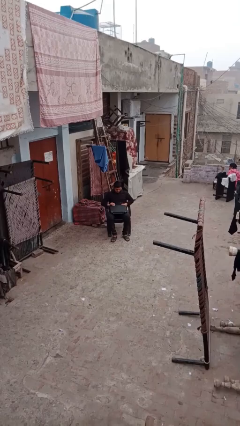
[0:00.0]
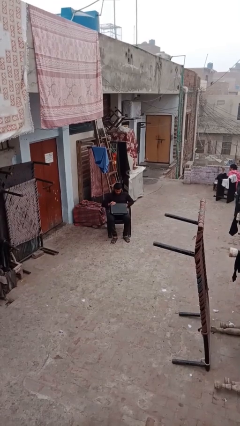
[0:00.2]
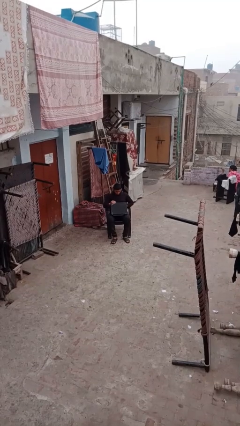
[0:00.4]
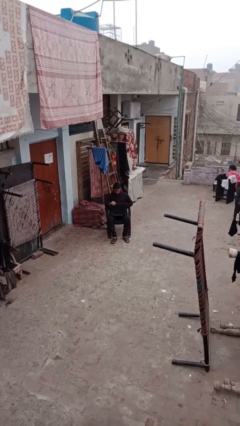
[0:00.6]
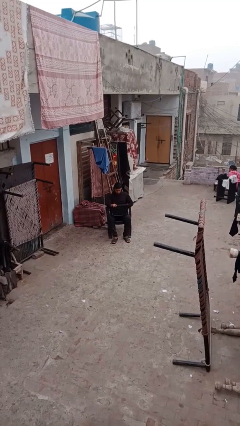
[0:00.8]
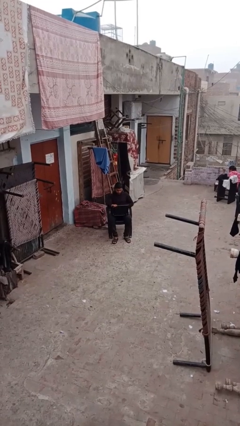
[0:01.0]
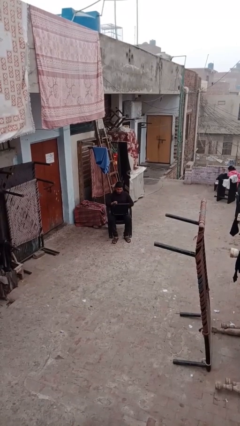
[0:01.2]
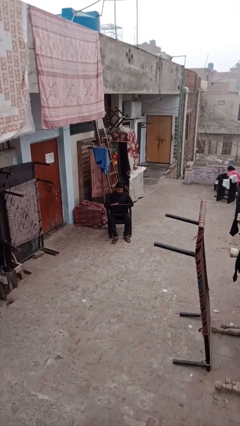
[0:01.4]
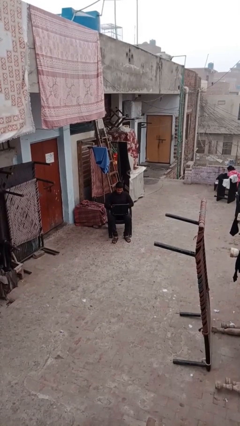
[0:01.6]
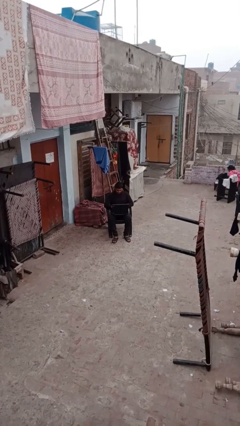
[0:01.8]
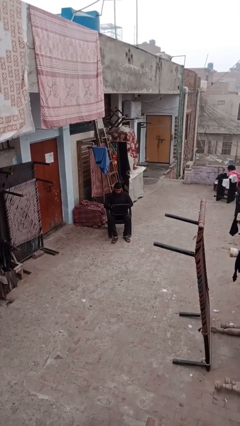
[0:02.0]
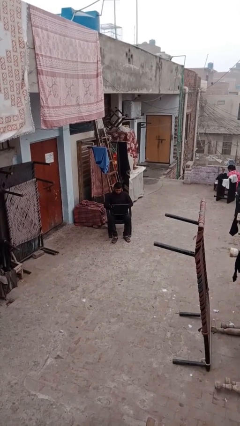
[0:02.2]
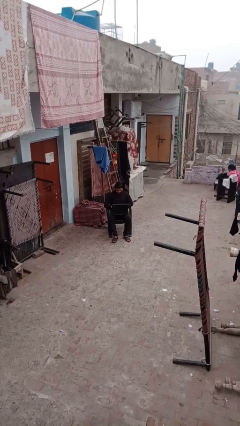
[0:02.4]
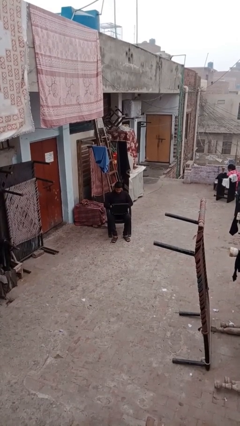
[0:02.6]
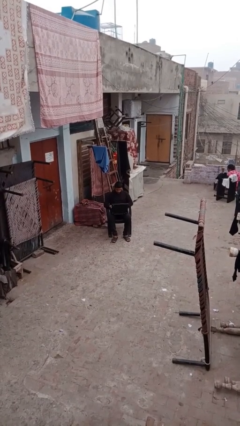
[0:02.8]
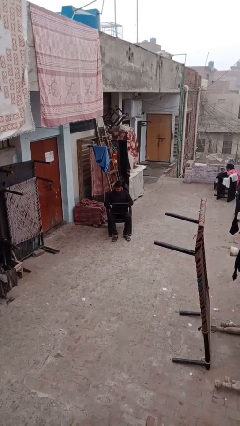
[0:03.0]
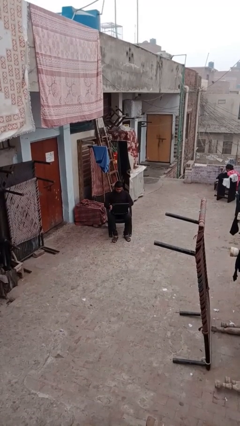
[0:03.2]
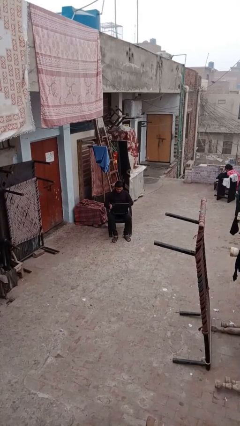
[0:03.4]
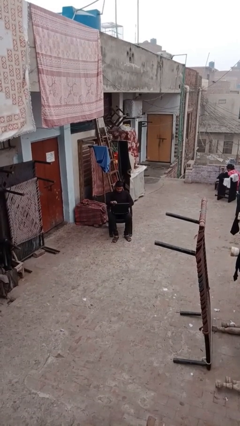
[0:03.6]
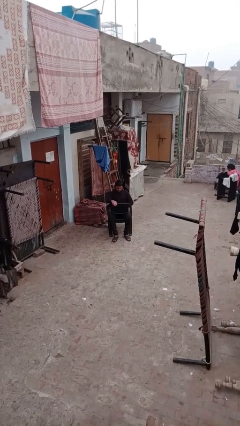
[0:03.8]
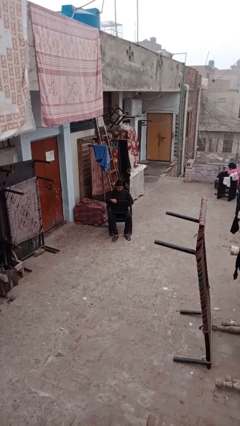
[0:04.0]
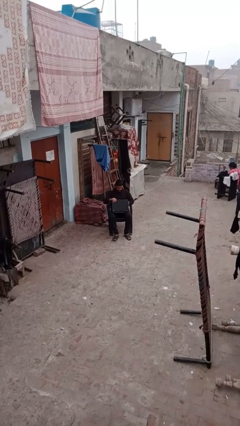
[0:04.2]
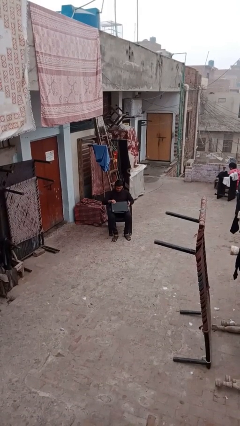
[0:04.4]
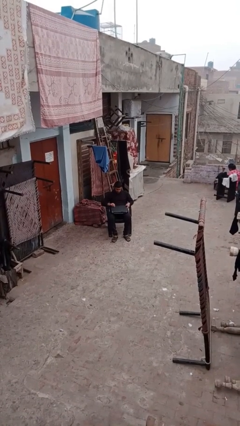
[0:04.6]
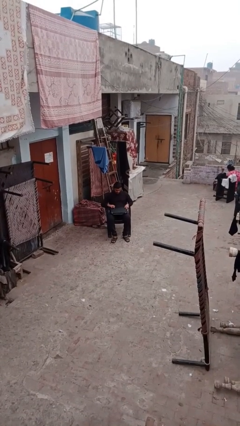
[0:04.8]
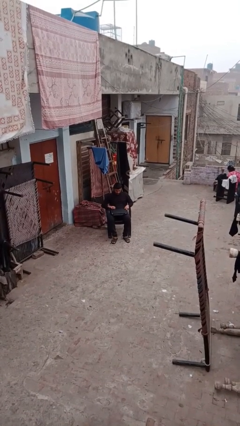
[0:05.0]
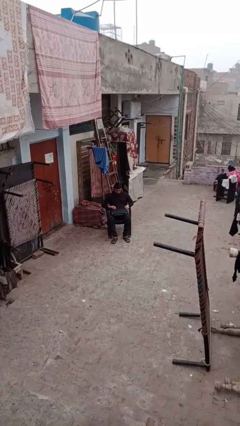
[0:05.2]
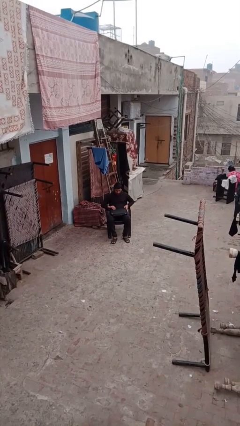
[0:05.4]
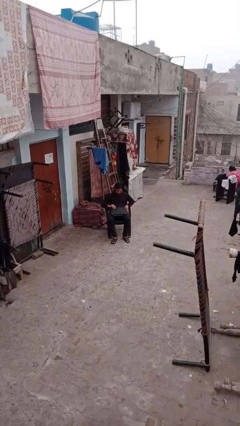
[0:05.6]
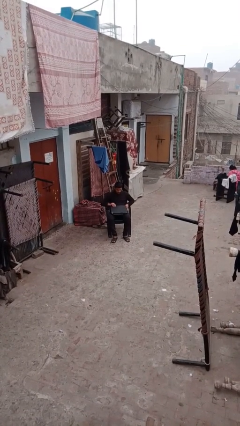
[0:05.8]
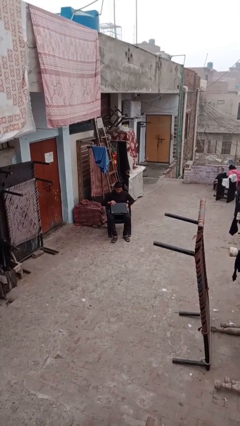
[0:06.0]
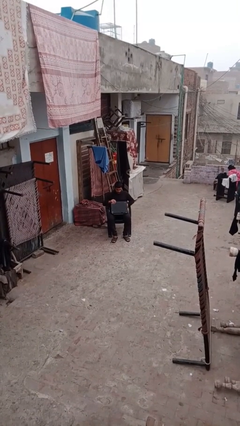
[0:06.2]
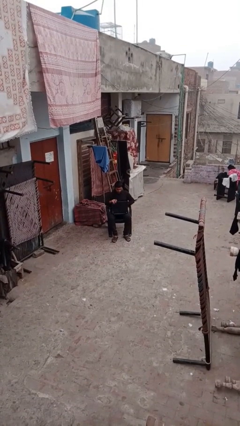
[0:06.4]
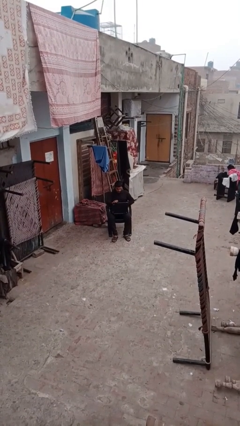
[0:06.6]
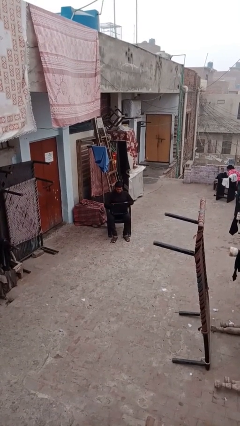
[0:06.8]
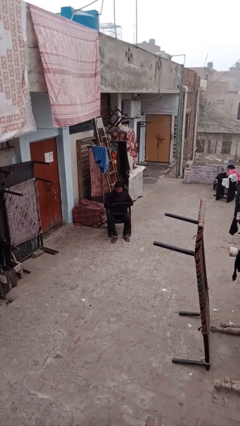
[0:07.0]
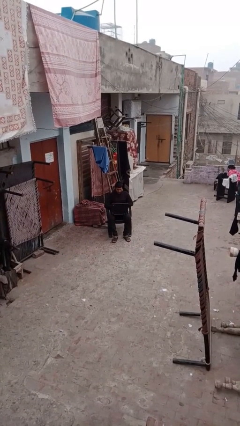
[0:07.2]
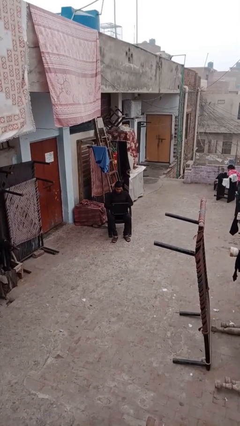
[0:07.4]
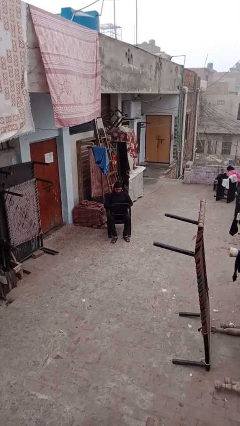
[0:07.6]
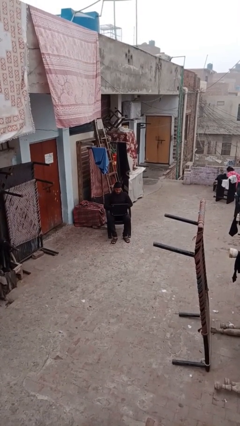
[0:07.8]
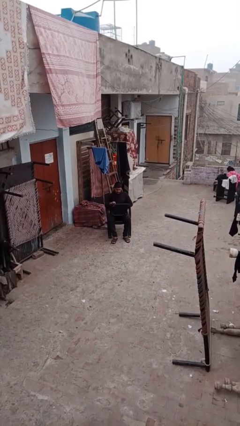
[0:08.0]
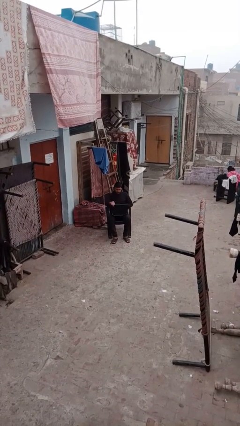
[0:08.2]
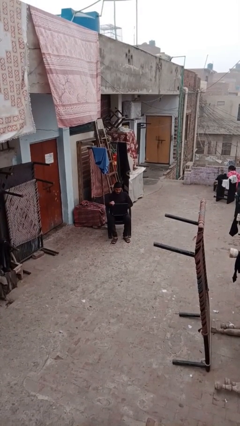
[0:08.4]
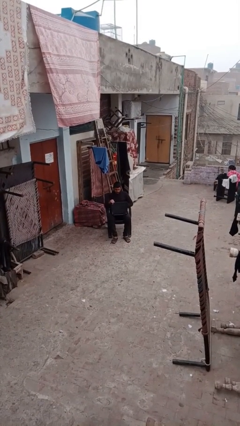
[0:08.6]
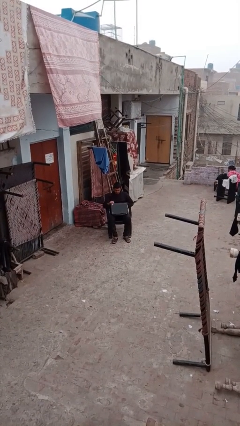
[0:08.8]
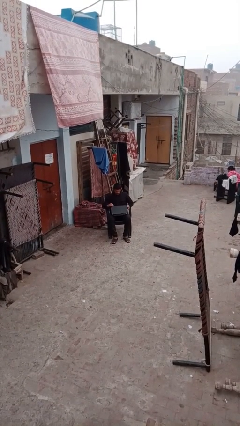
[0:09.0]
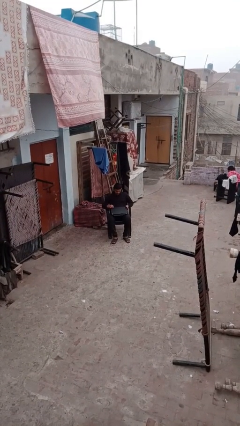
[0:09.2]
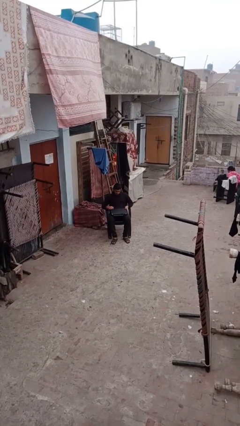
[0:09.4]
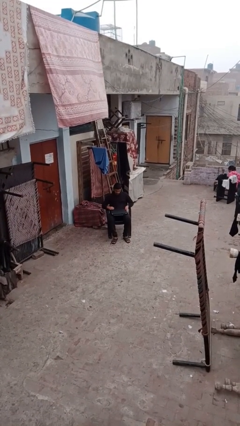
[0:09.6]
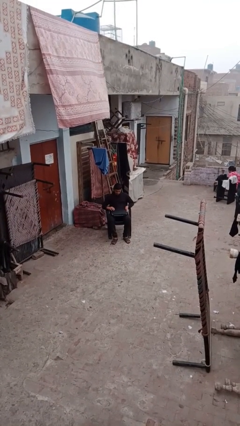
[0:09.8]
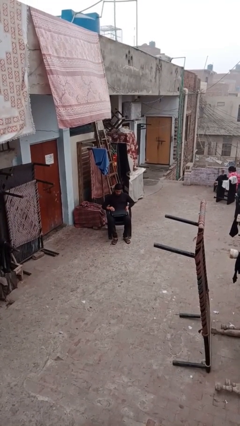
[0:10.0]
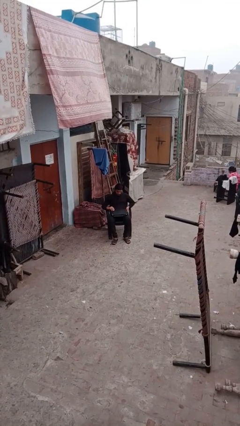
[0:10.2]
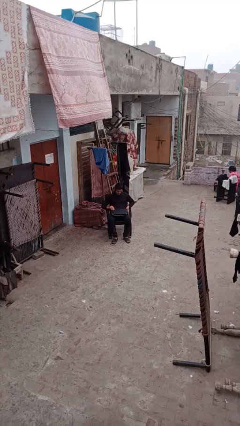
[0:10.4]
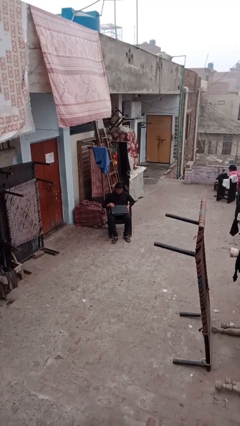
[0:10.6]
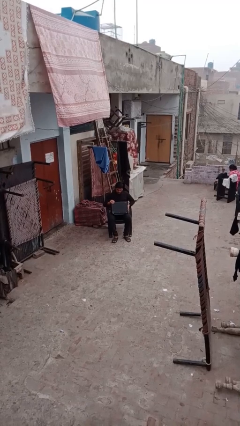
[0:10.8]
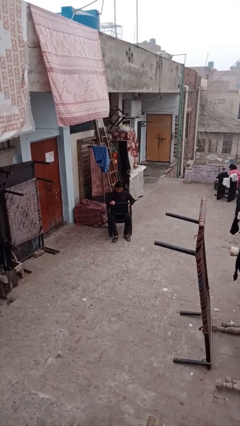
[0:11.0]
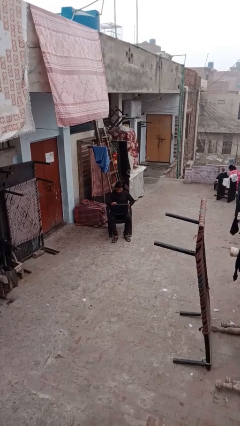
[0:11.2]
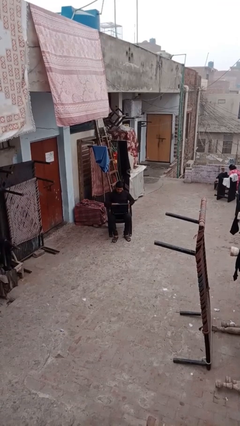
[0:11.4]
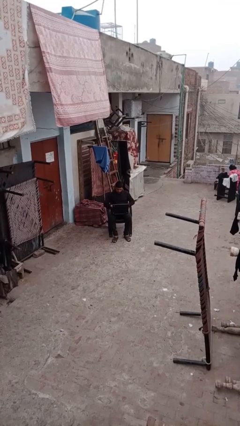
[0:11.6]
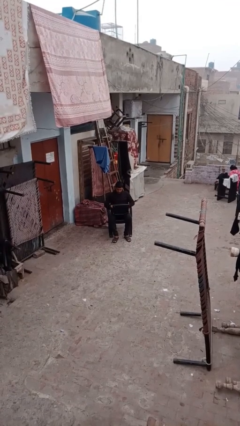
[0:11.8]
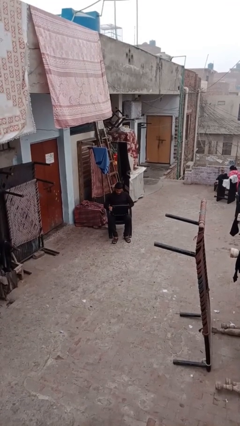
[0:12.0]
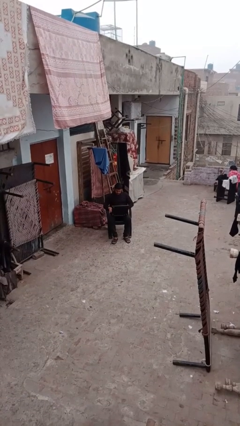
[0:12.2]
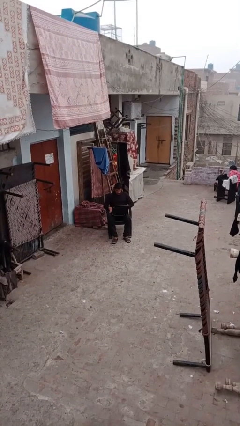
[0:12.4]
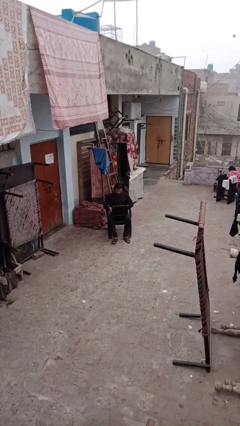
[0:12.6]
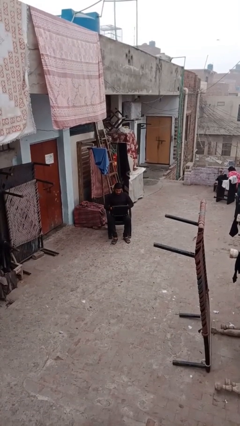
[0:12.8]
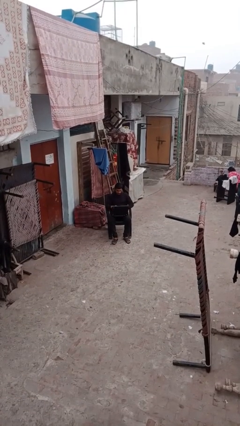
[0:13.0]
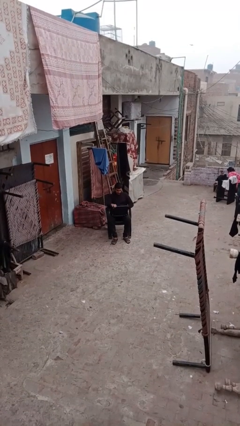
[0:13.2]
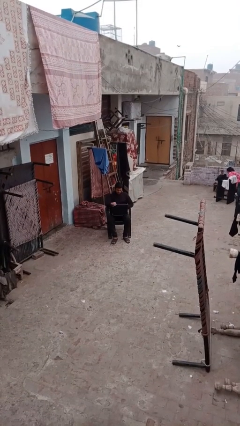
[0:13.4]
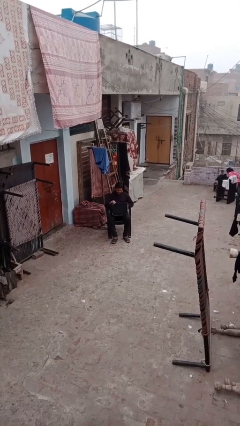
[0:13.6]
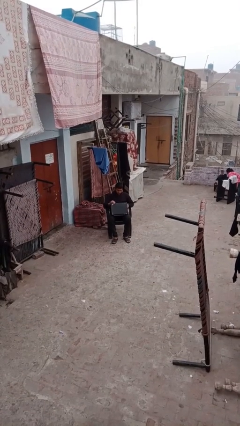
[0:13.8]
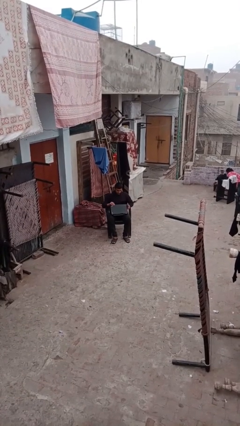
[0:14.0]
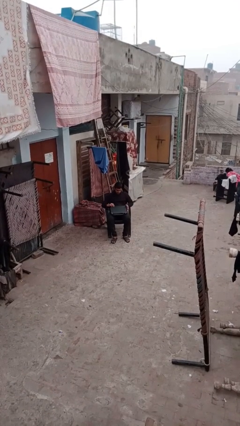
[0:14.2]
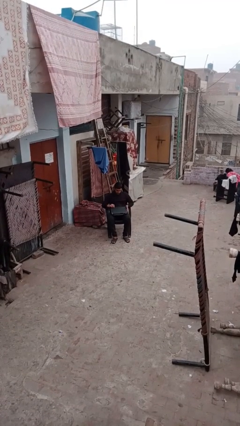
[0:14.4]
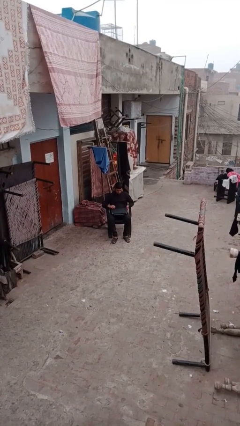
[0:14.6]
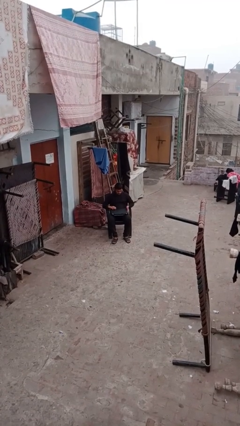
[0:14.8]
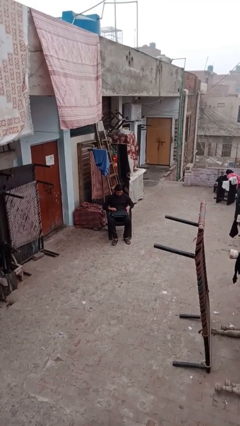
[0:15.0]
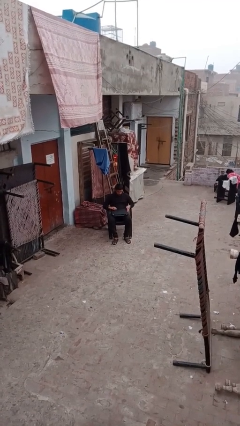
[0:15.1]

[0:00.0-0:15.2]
person interacts with laptop

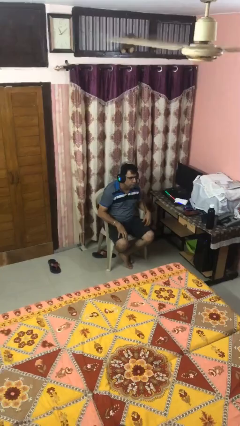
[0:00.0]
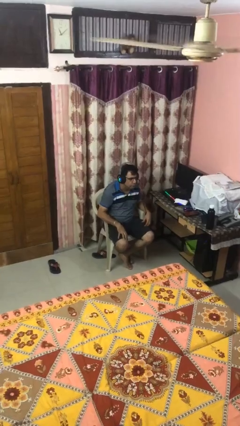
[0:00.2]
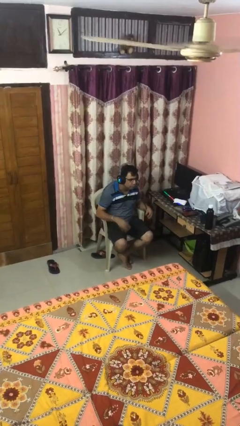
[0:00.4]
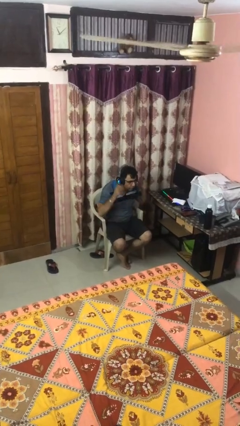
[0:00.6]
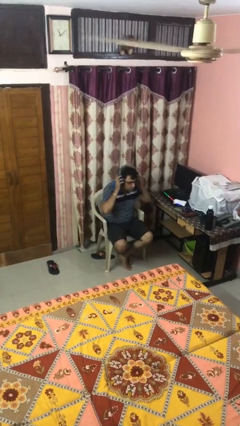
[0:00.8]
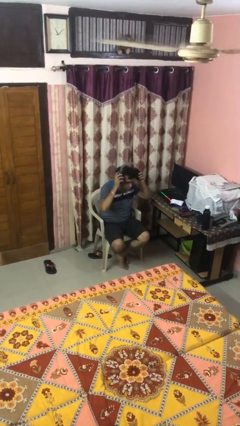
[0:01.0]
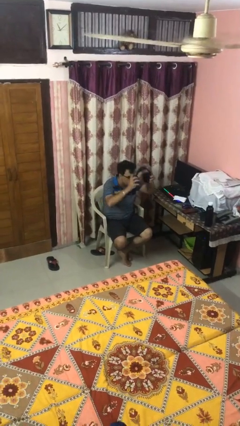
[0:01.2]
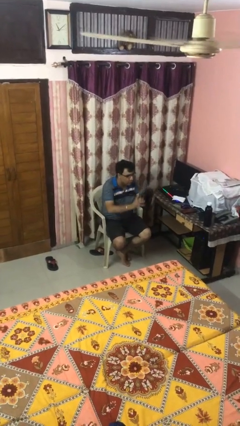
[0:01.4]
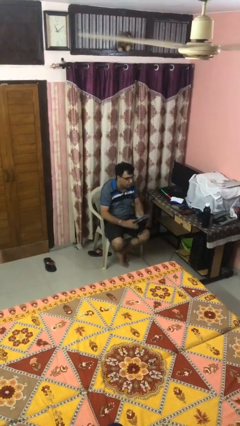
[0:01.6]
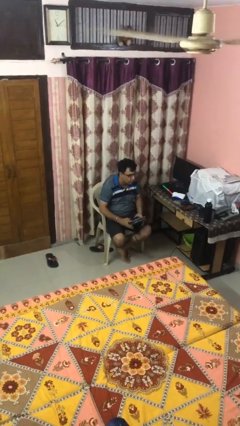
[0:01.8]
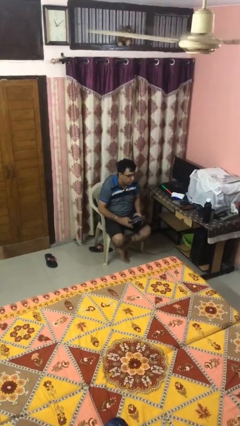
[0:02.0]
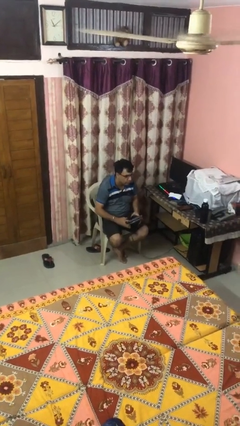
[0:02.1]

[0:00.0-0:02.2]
person takes off headphones

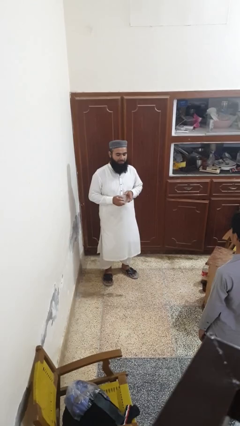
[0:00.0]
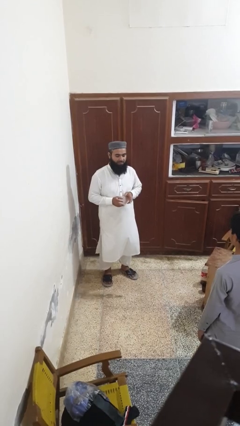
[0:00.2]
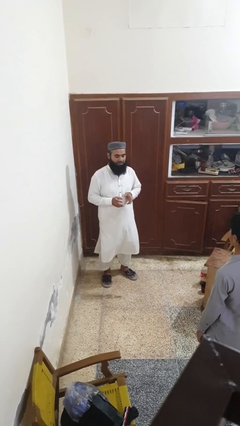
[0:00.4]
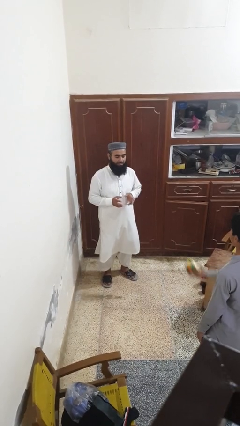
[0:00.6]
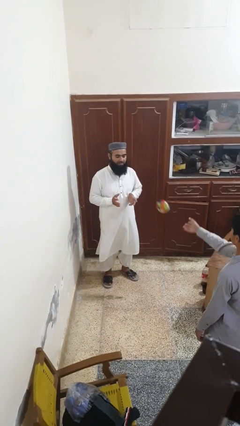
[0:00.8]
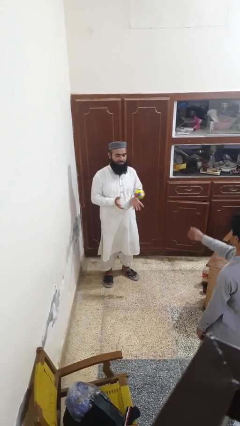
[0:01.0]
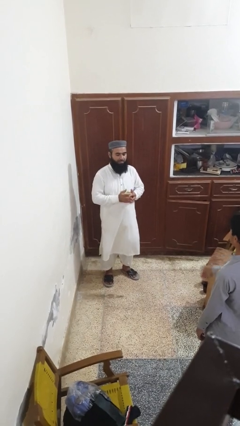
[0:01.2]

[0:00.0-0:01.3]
person catches object from person
